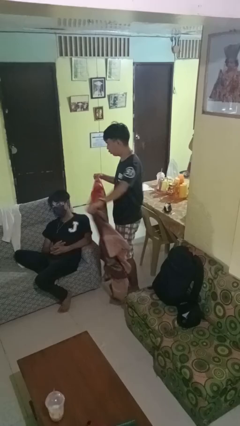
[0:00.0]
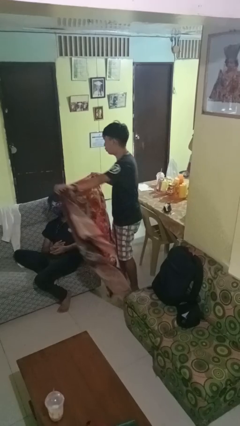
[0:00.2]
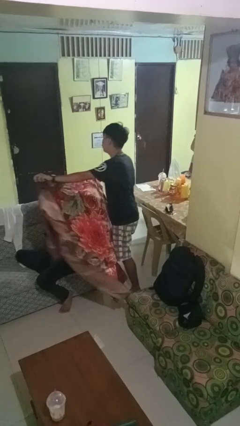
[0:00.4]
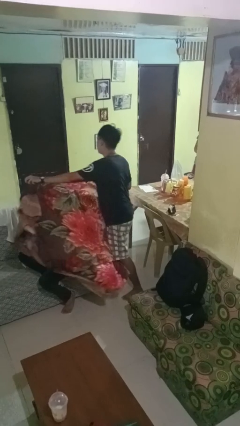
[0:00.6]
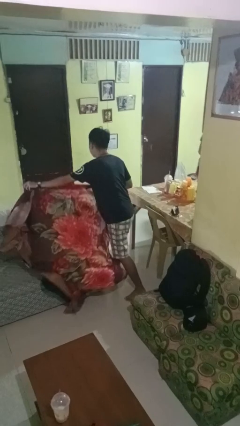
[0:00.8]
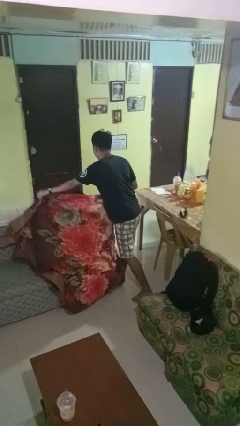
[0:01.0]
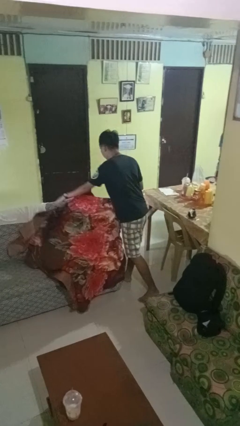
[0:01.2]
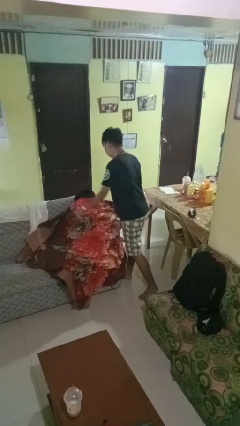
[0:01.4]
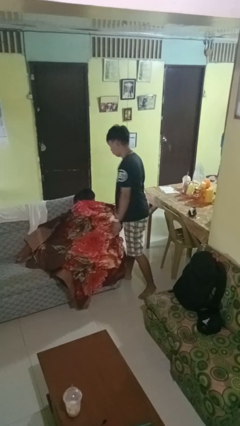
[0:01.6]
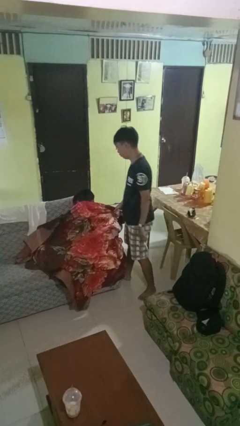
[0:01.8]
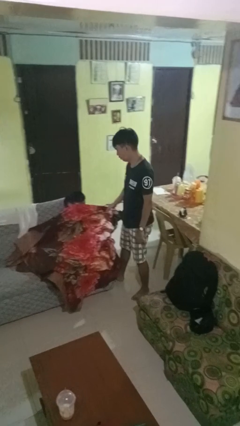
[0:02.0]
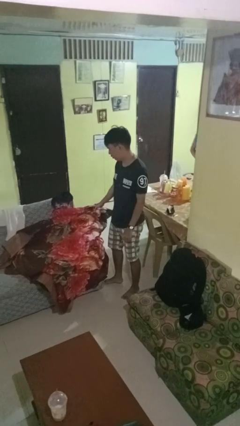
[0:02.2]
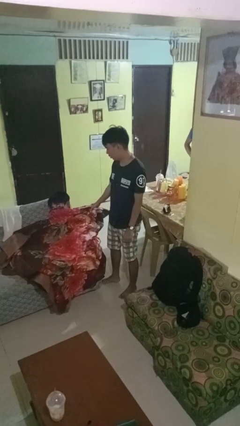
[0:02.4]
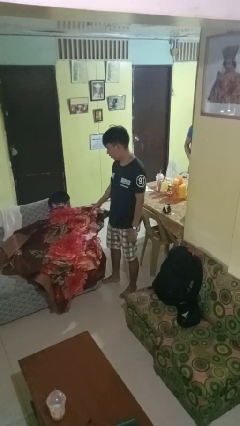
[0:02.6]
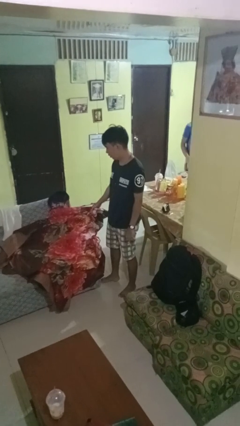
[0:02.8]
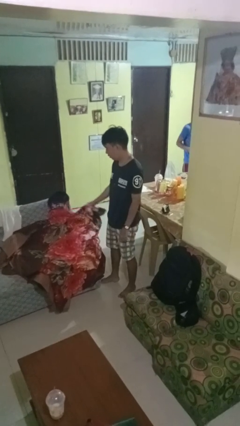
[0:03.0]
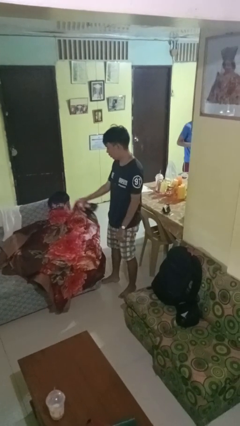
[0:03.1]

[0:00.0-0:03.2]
person covers friend with blanket

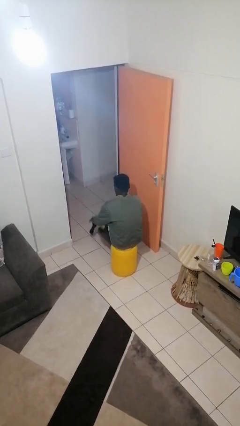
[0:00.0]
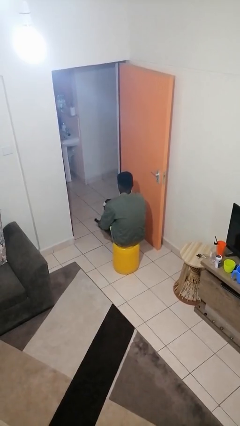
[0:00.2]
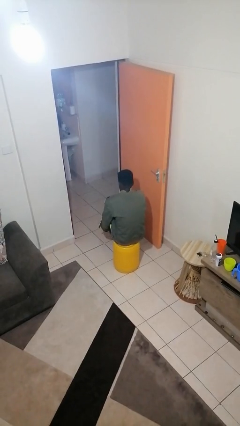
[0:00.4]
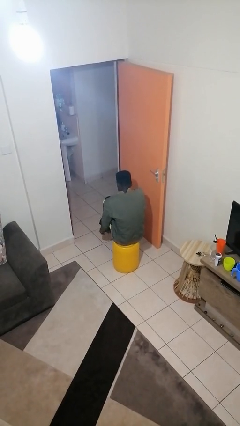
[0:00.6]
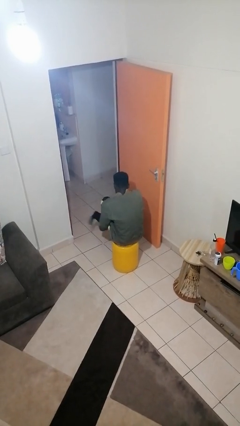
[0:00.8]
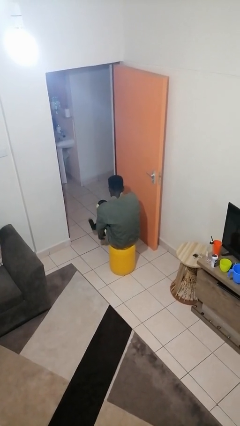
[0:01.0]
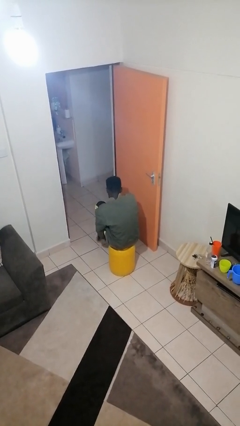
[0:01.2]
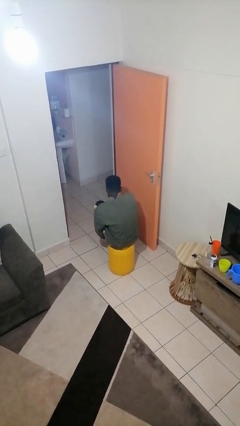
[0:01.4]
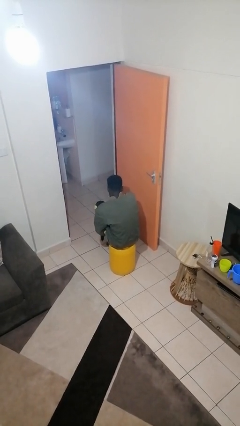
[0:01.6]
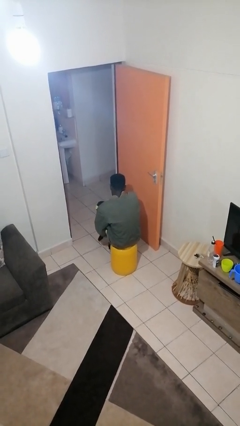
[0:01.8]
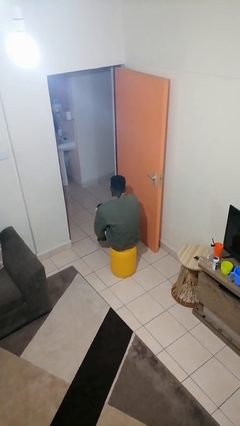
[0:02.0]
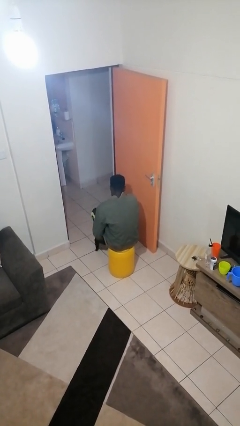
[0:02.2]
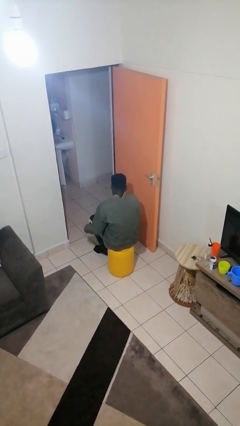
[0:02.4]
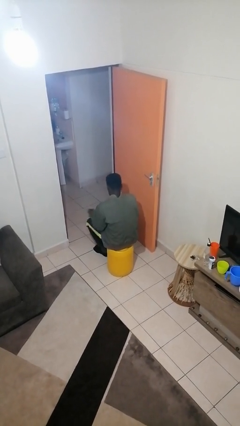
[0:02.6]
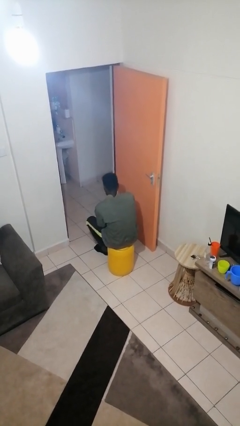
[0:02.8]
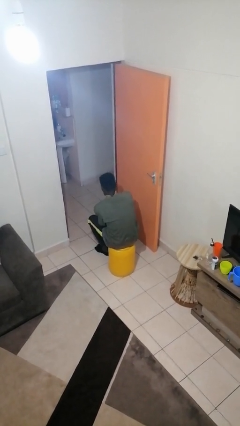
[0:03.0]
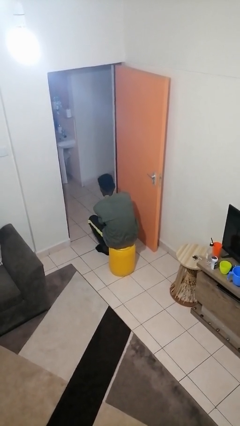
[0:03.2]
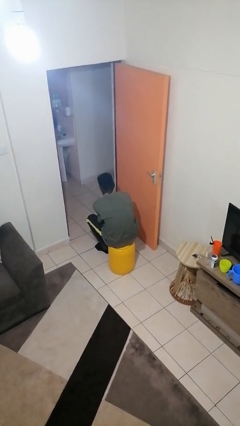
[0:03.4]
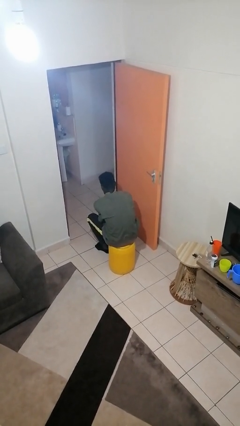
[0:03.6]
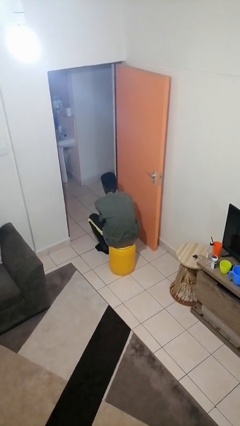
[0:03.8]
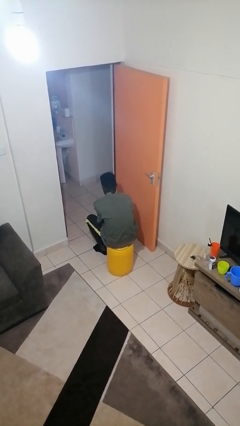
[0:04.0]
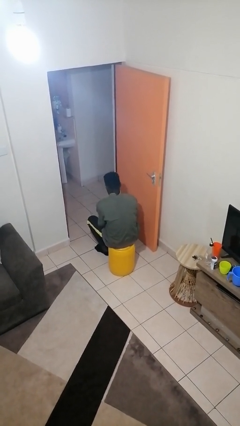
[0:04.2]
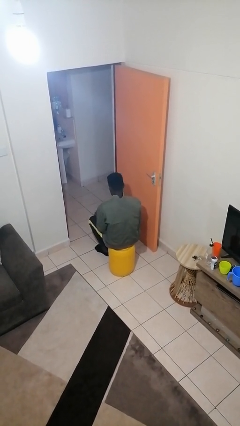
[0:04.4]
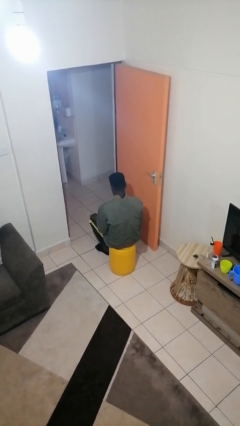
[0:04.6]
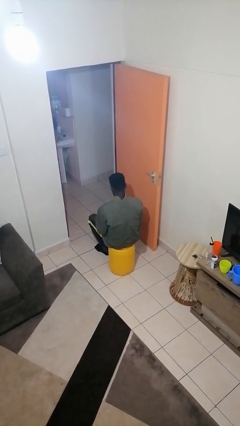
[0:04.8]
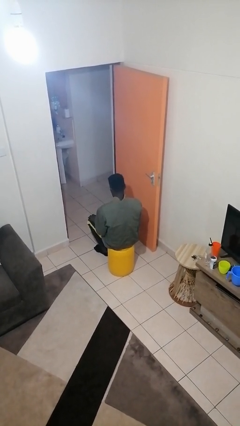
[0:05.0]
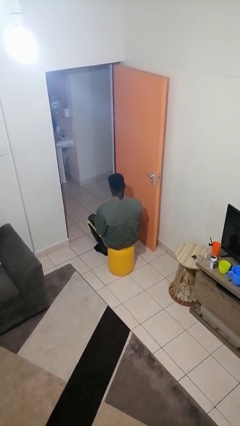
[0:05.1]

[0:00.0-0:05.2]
person puts on socks

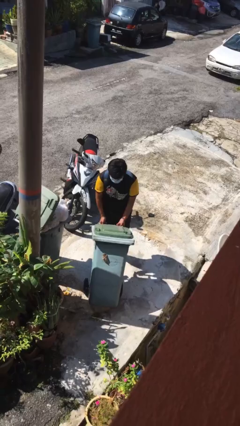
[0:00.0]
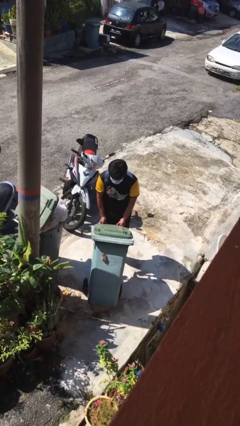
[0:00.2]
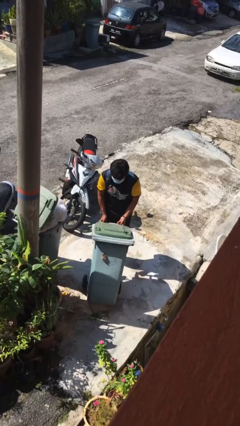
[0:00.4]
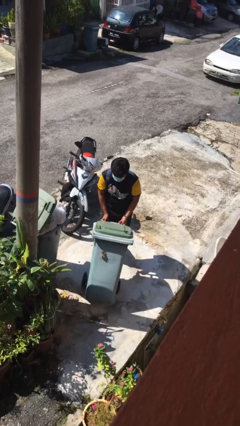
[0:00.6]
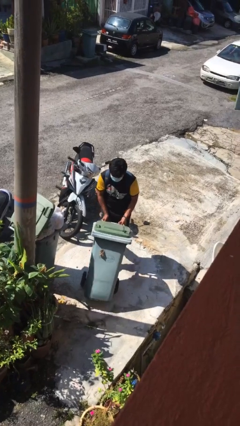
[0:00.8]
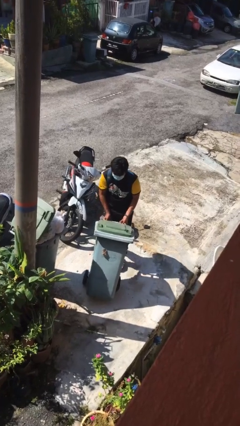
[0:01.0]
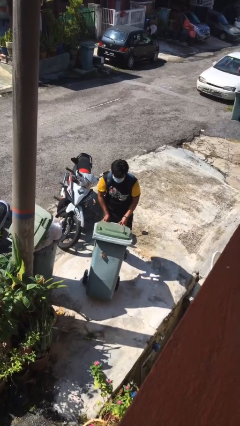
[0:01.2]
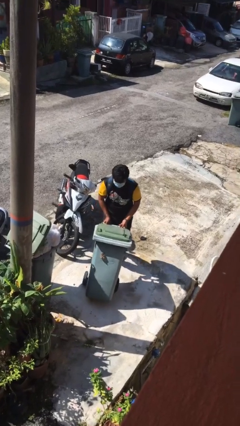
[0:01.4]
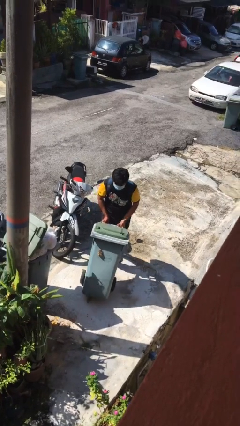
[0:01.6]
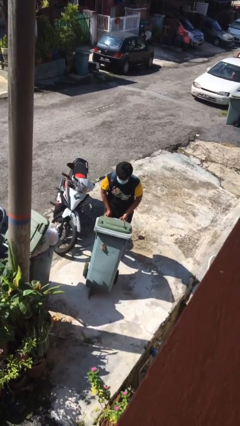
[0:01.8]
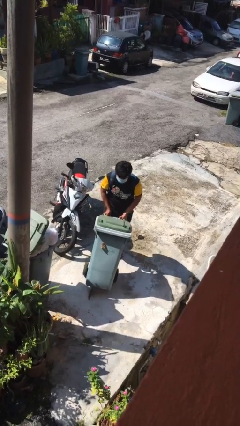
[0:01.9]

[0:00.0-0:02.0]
person pulls wheeled trashcan

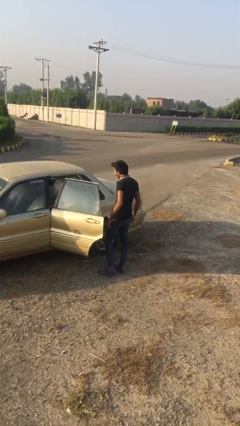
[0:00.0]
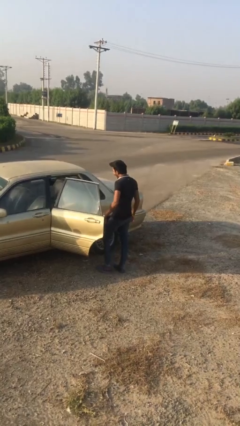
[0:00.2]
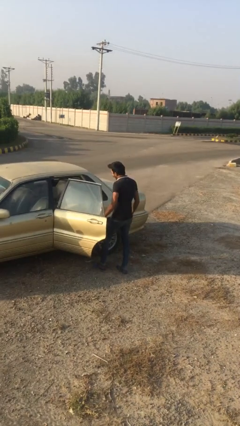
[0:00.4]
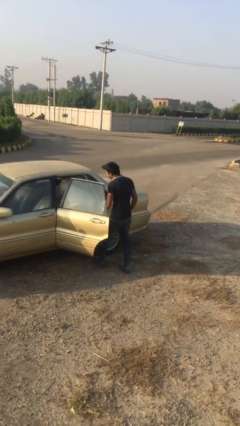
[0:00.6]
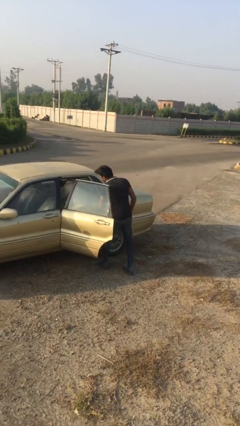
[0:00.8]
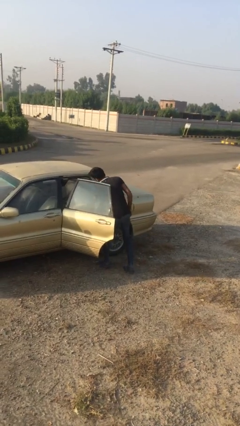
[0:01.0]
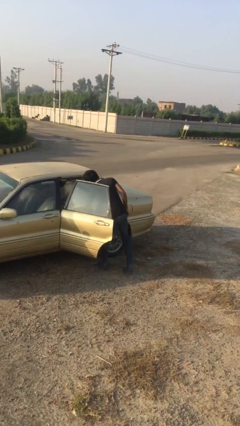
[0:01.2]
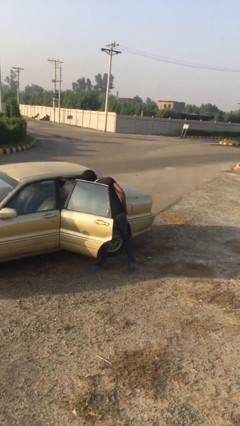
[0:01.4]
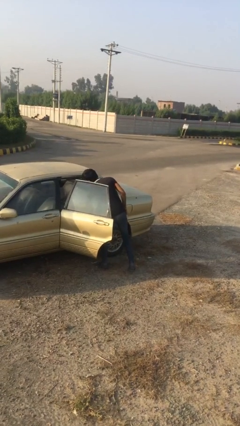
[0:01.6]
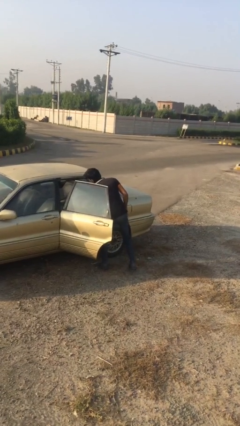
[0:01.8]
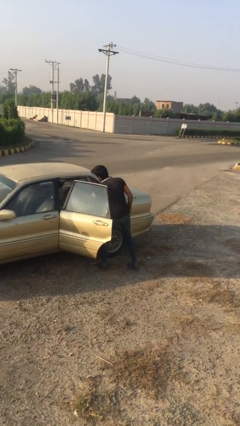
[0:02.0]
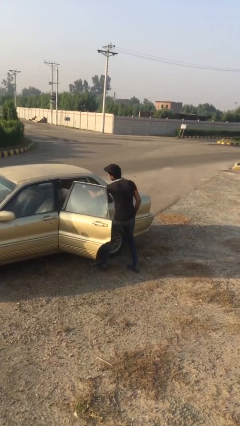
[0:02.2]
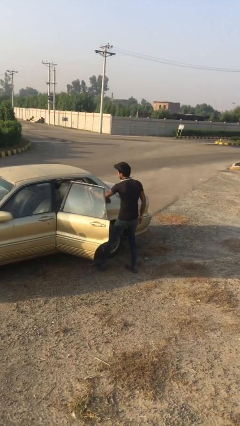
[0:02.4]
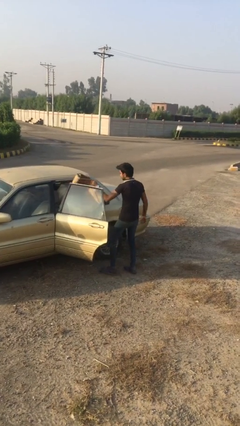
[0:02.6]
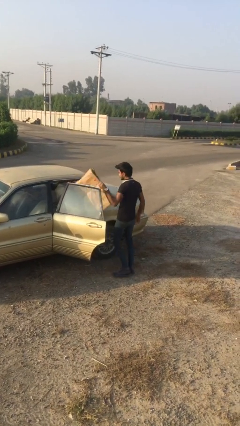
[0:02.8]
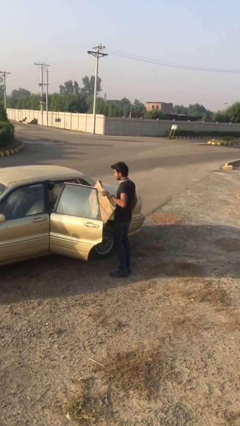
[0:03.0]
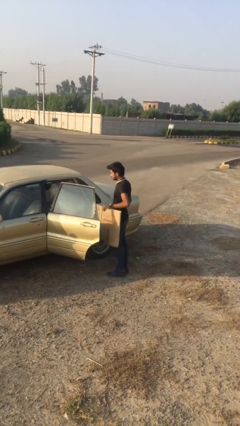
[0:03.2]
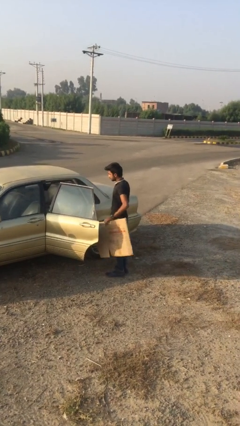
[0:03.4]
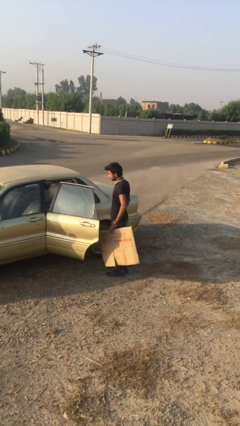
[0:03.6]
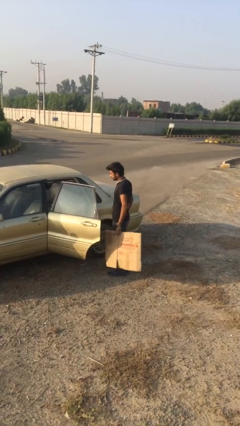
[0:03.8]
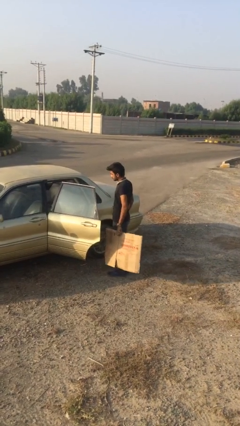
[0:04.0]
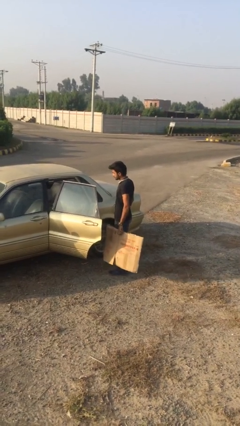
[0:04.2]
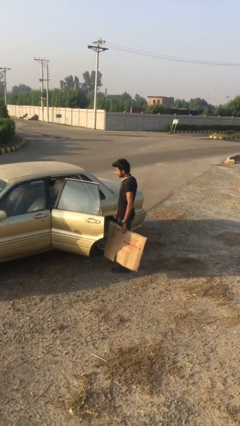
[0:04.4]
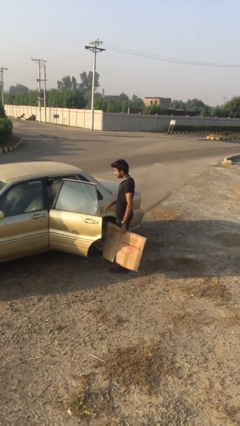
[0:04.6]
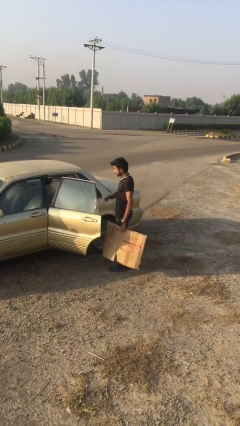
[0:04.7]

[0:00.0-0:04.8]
person unloads car

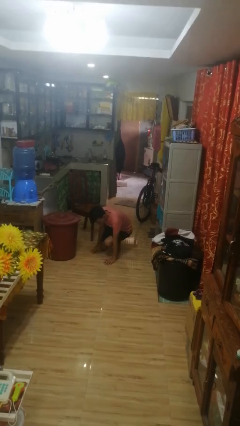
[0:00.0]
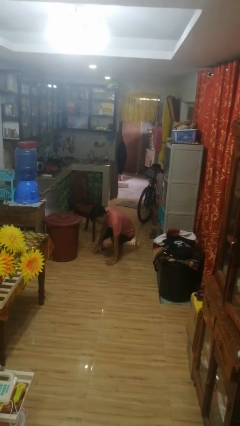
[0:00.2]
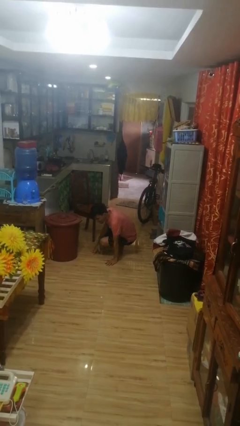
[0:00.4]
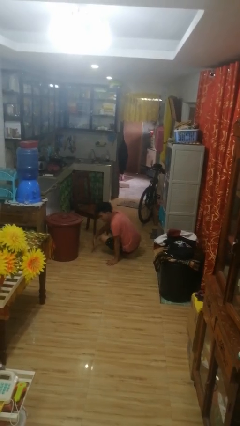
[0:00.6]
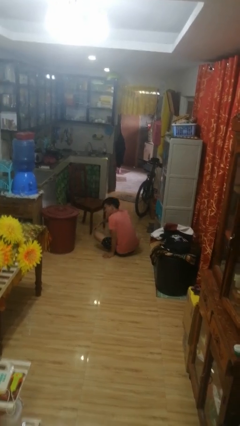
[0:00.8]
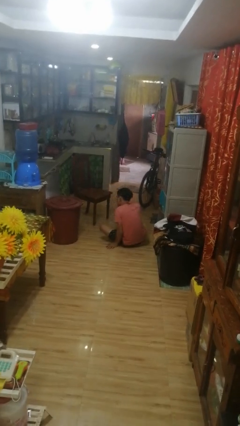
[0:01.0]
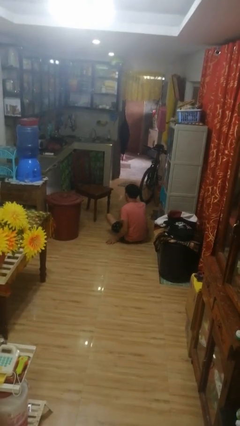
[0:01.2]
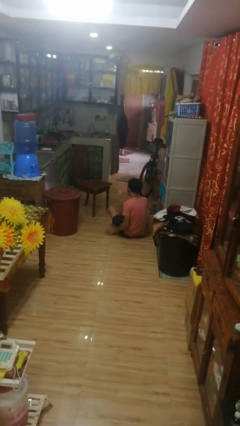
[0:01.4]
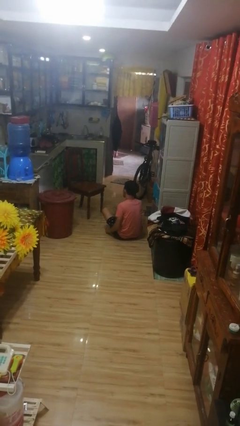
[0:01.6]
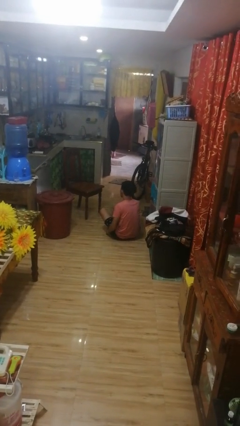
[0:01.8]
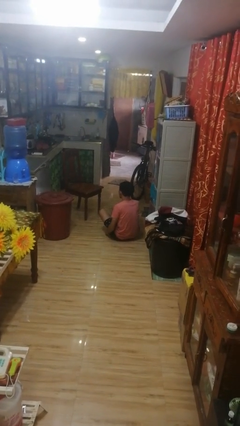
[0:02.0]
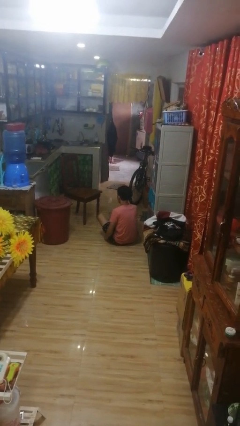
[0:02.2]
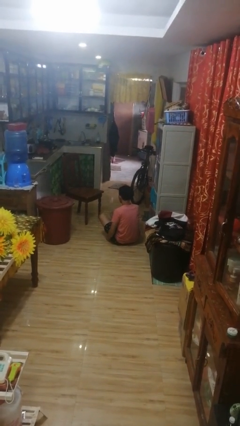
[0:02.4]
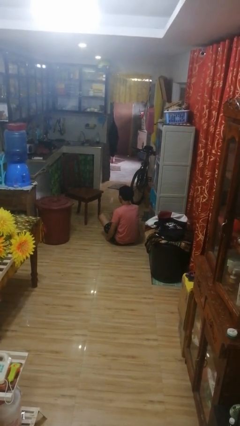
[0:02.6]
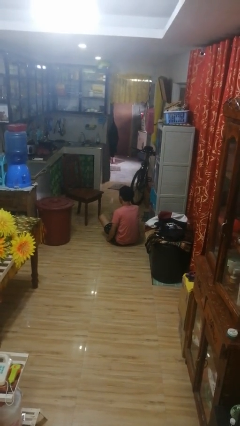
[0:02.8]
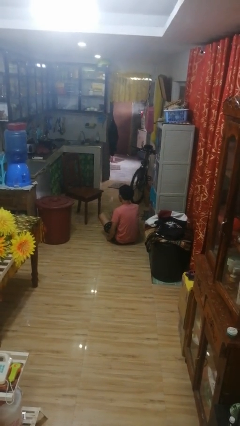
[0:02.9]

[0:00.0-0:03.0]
person lies down on floor
